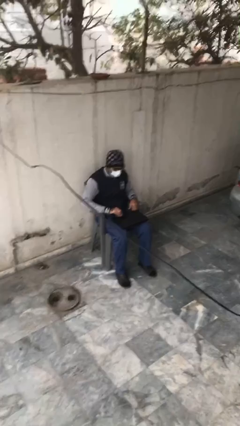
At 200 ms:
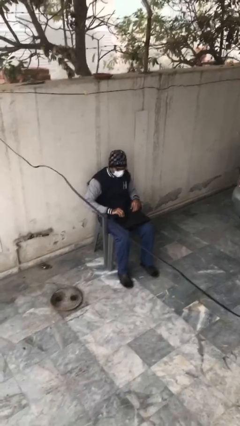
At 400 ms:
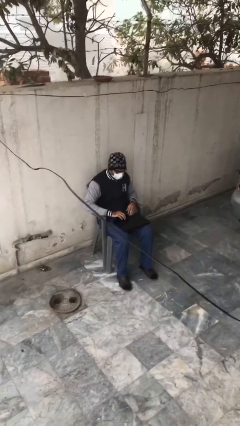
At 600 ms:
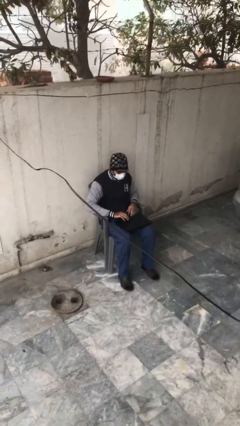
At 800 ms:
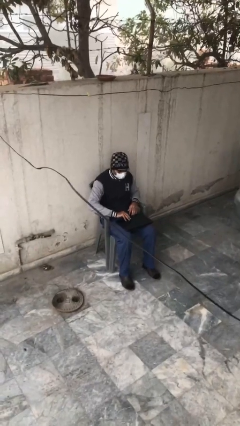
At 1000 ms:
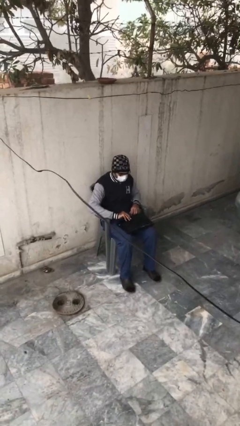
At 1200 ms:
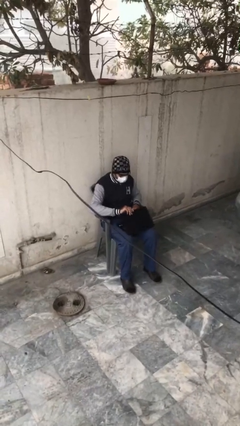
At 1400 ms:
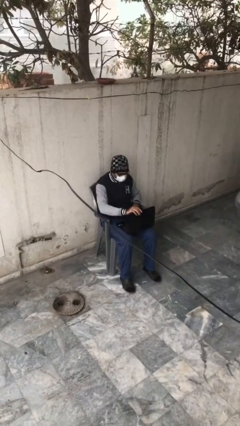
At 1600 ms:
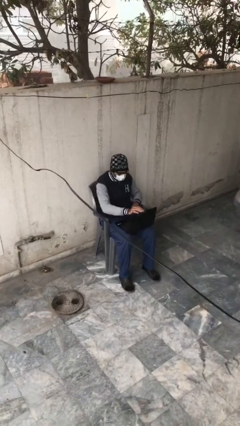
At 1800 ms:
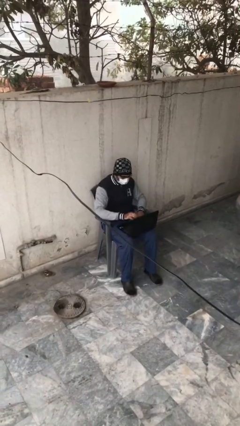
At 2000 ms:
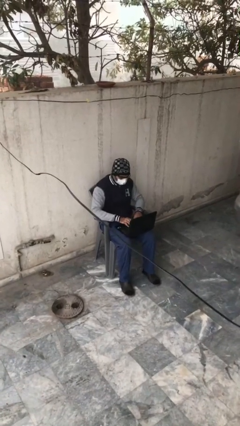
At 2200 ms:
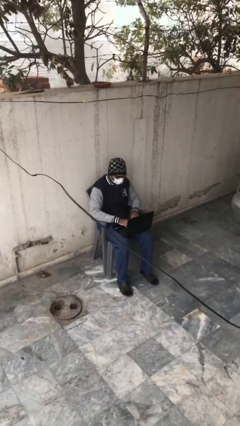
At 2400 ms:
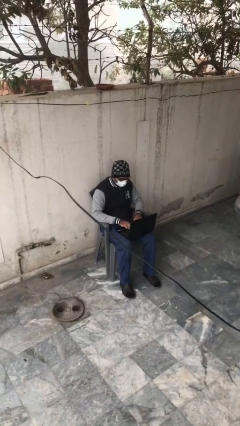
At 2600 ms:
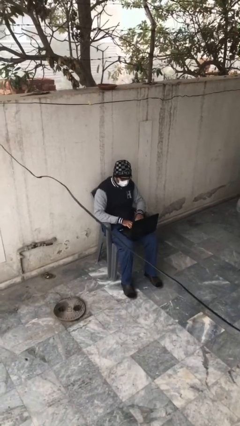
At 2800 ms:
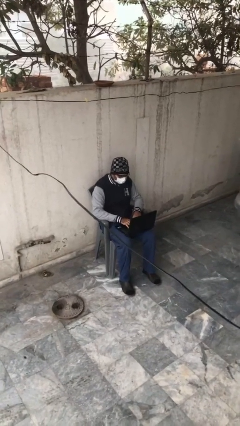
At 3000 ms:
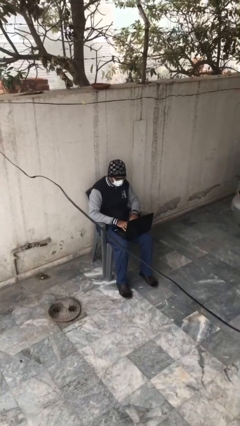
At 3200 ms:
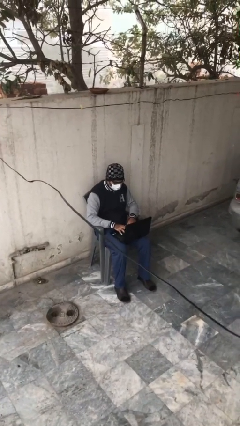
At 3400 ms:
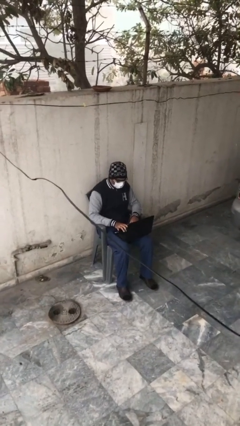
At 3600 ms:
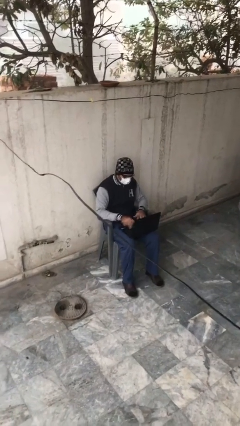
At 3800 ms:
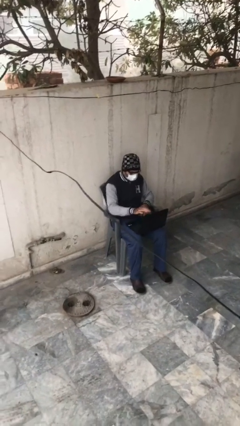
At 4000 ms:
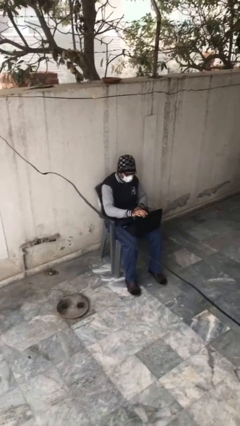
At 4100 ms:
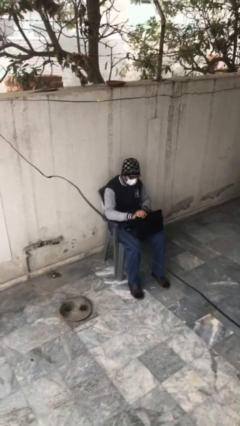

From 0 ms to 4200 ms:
person interacts with laptop

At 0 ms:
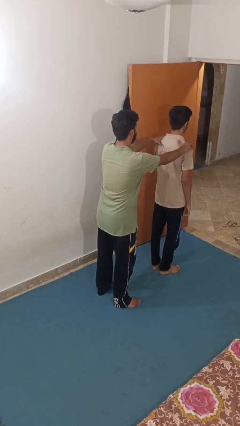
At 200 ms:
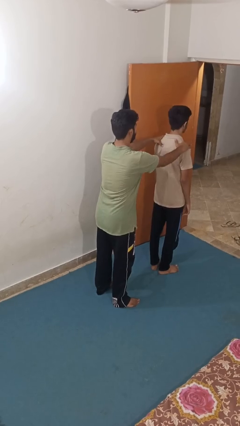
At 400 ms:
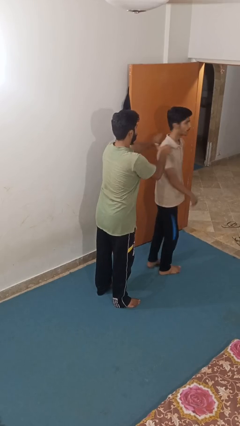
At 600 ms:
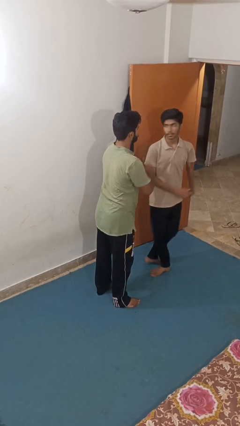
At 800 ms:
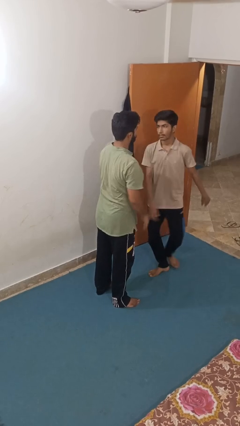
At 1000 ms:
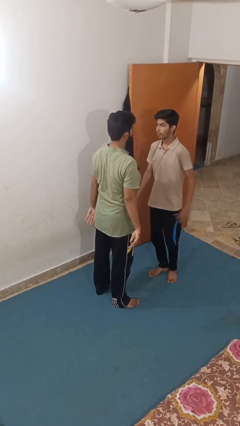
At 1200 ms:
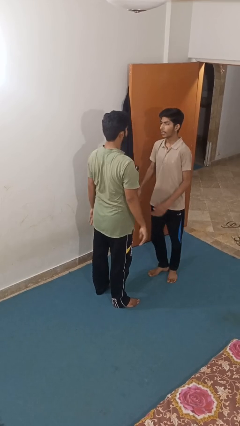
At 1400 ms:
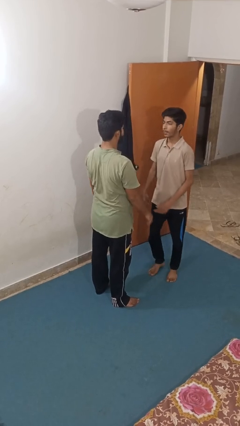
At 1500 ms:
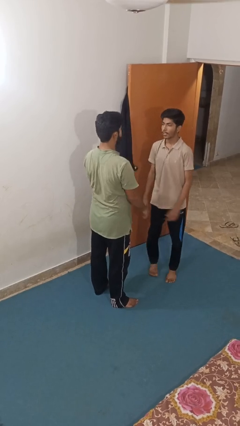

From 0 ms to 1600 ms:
person spins person around

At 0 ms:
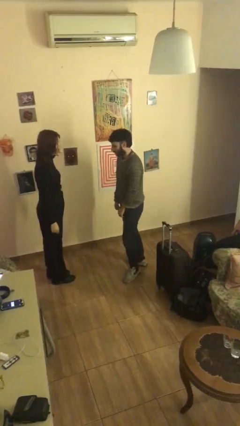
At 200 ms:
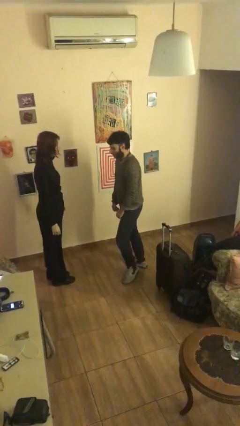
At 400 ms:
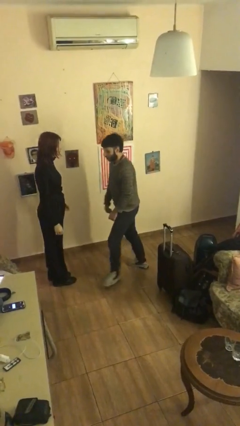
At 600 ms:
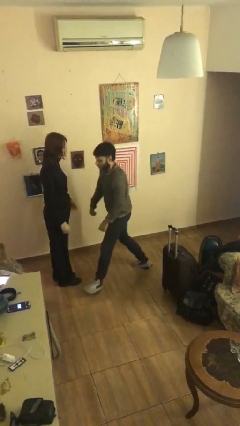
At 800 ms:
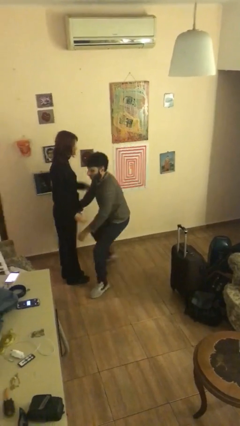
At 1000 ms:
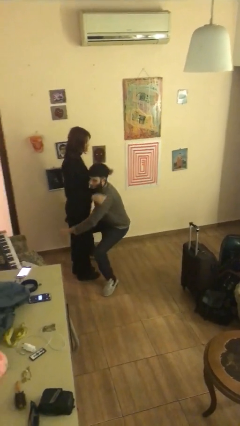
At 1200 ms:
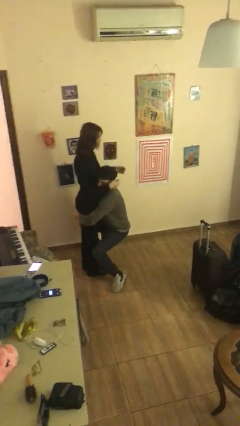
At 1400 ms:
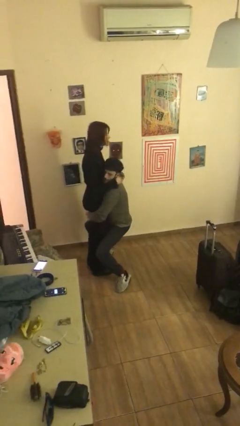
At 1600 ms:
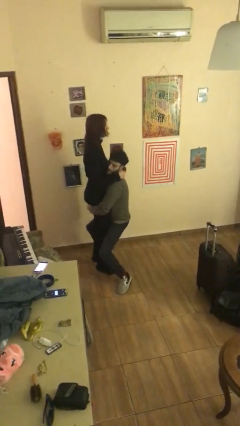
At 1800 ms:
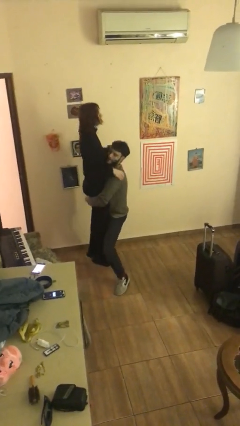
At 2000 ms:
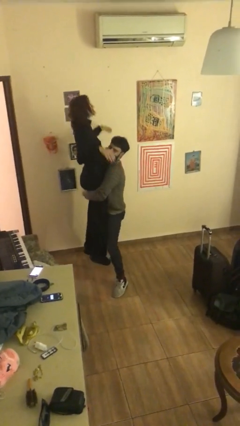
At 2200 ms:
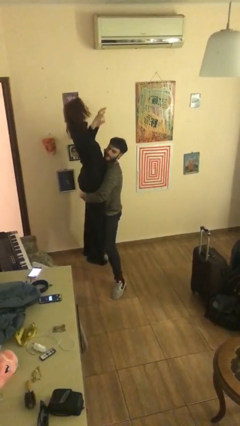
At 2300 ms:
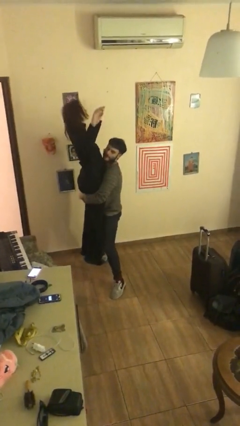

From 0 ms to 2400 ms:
person picks up person

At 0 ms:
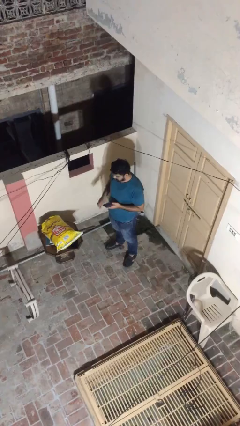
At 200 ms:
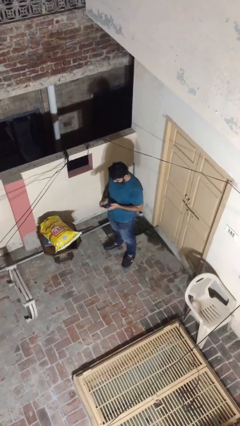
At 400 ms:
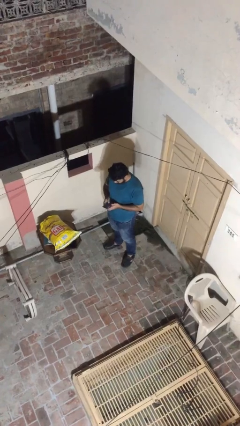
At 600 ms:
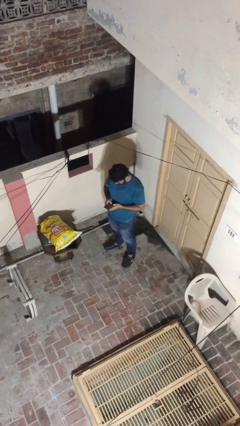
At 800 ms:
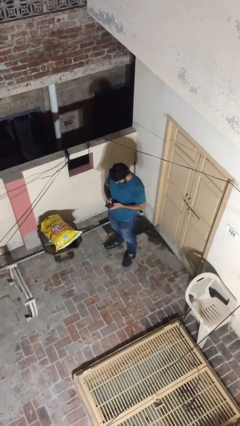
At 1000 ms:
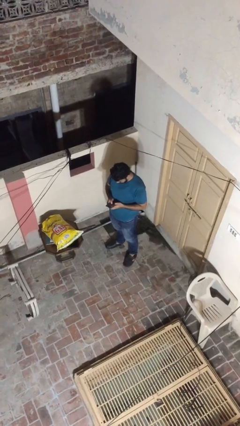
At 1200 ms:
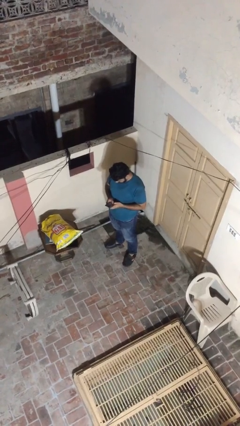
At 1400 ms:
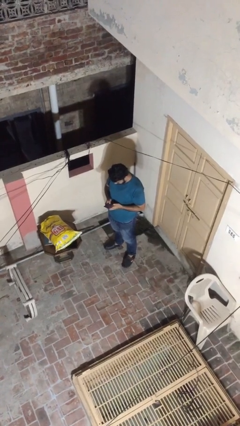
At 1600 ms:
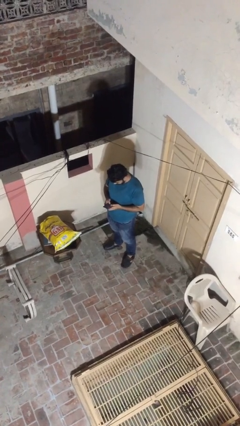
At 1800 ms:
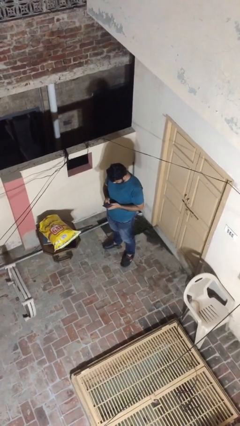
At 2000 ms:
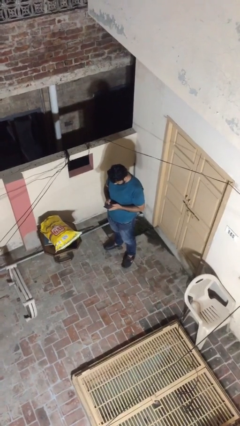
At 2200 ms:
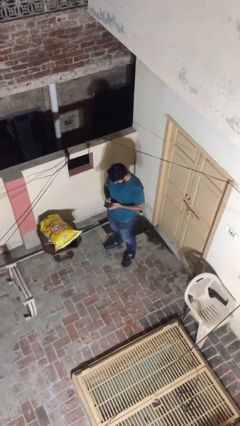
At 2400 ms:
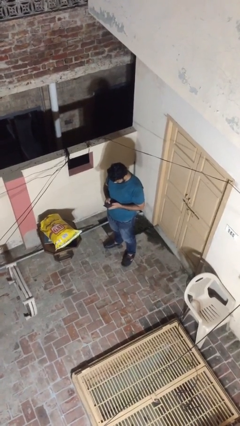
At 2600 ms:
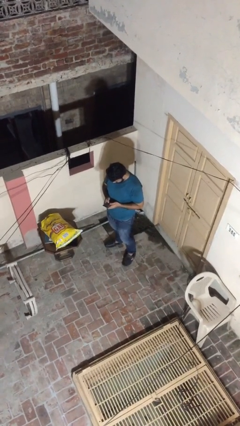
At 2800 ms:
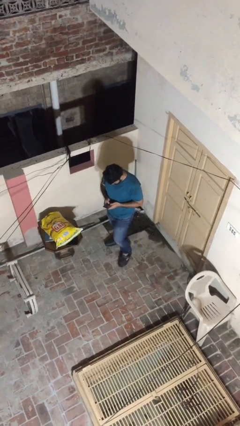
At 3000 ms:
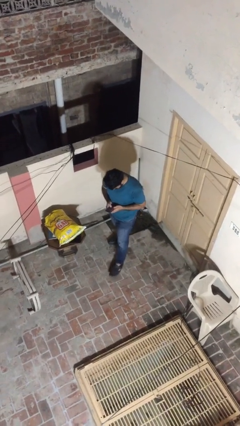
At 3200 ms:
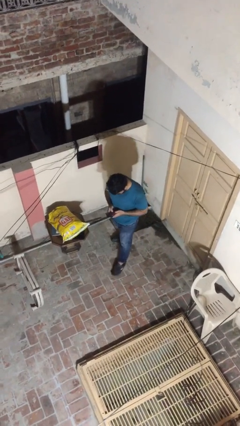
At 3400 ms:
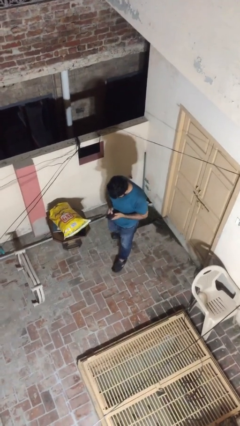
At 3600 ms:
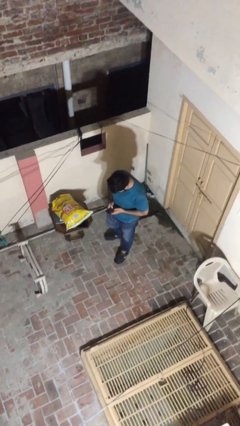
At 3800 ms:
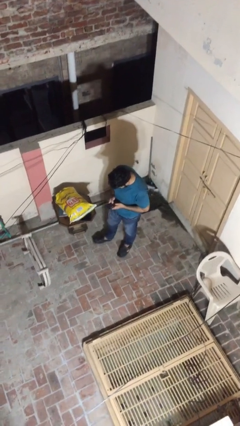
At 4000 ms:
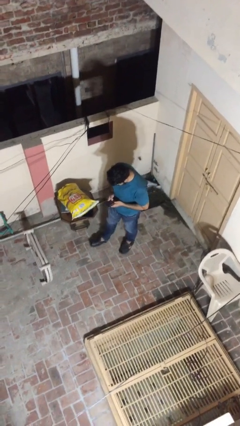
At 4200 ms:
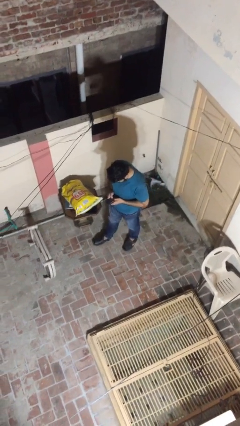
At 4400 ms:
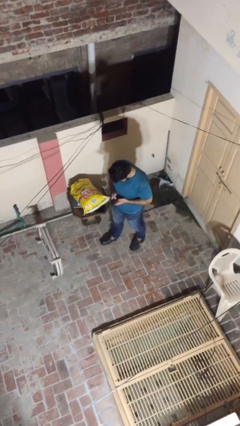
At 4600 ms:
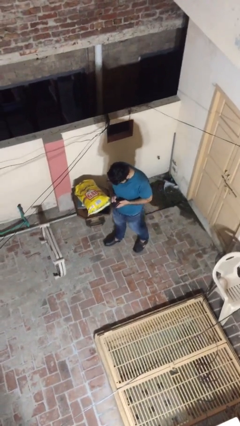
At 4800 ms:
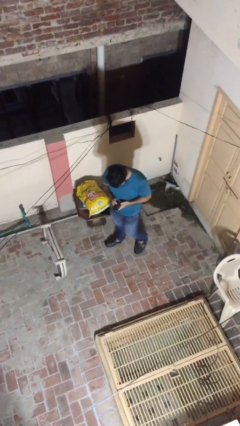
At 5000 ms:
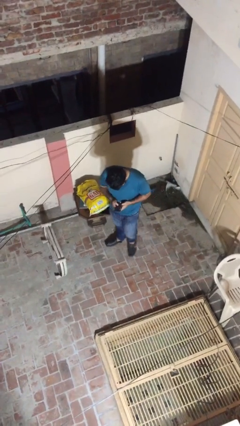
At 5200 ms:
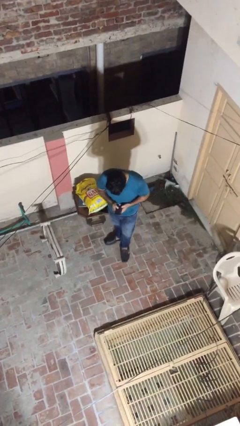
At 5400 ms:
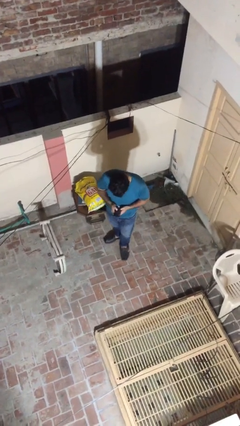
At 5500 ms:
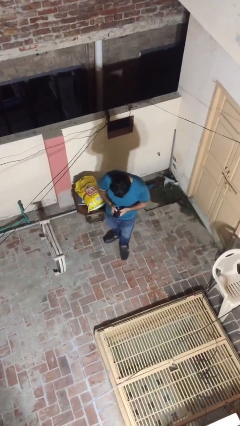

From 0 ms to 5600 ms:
person texts on phone

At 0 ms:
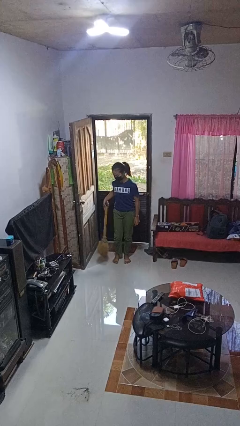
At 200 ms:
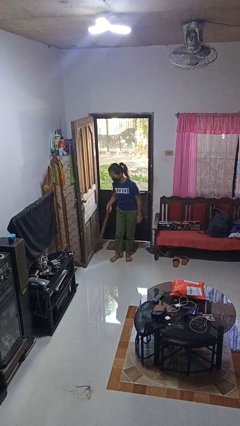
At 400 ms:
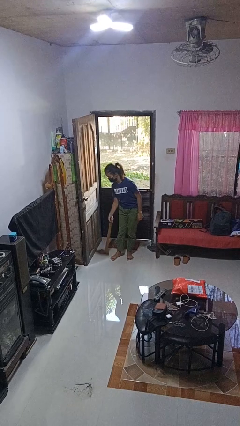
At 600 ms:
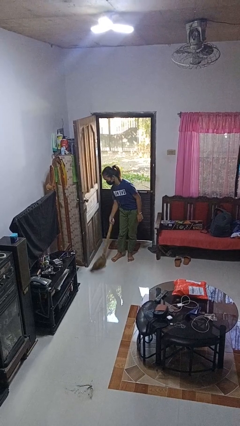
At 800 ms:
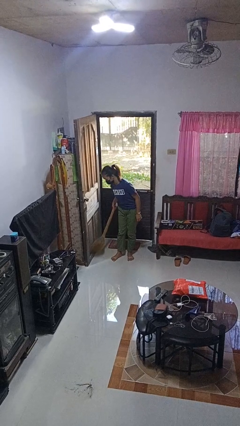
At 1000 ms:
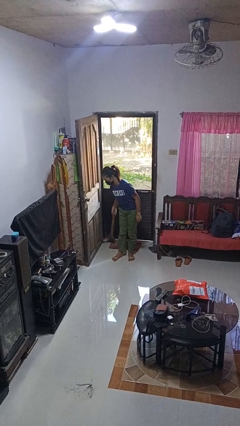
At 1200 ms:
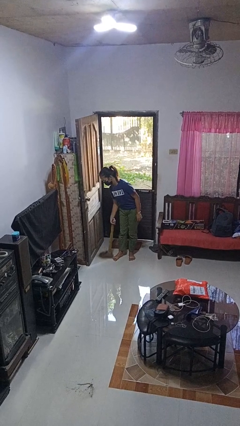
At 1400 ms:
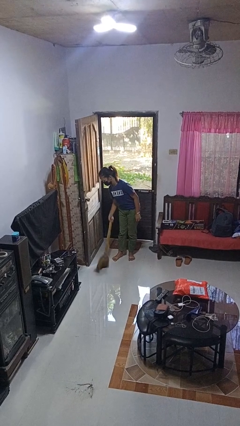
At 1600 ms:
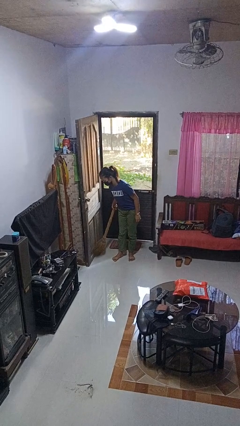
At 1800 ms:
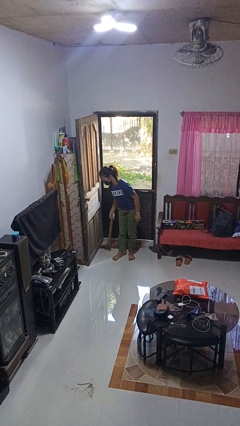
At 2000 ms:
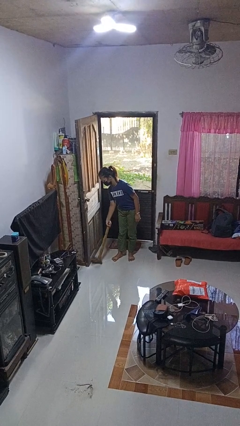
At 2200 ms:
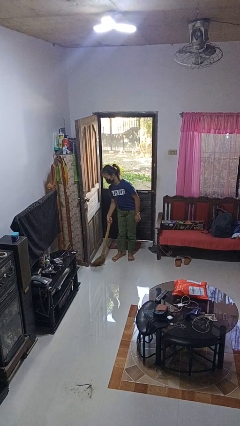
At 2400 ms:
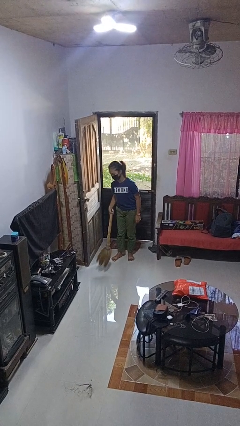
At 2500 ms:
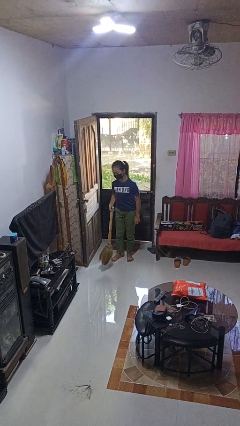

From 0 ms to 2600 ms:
person sweeps floor

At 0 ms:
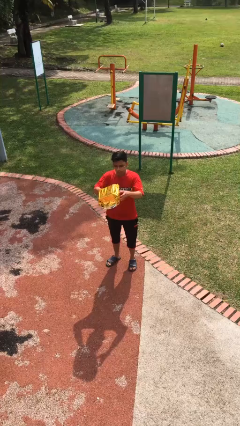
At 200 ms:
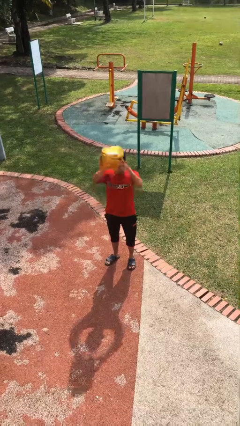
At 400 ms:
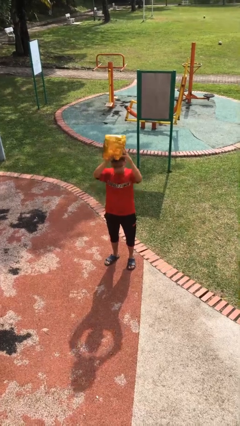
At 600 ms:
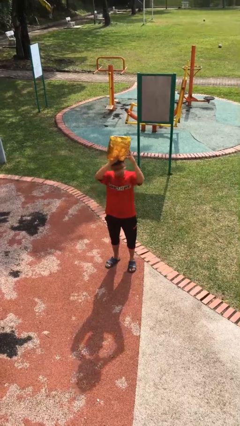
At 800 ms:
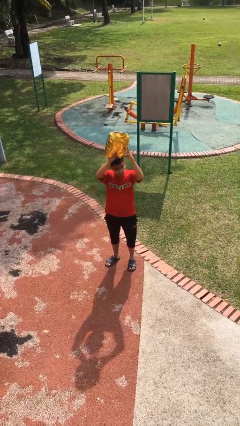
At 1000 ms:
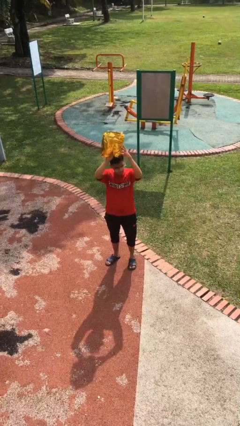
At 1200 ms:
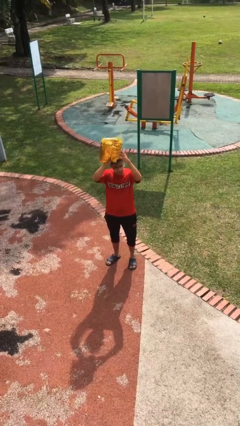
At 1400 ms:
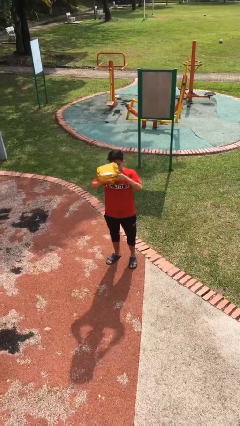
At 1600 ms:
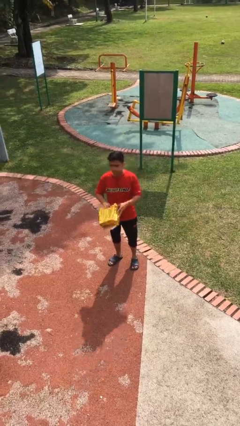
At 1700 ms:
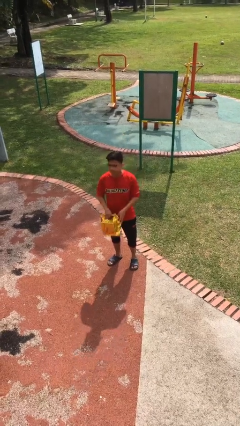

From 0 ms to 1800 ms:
person holds object above head
